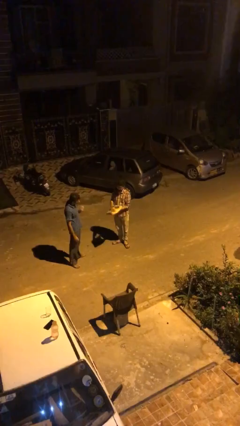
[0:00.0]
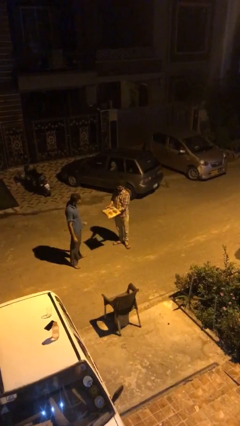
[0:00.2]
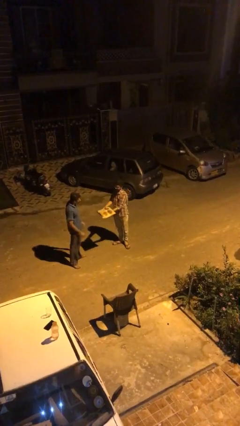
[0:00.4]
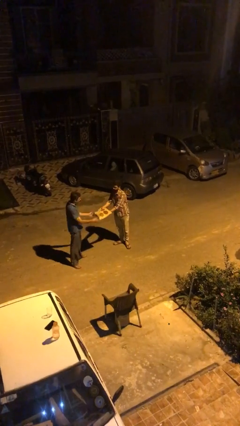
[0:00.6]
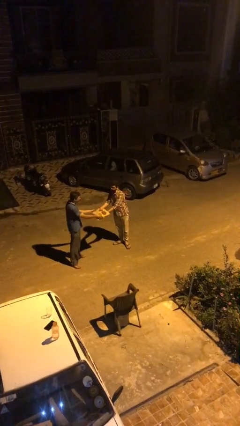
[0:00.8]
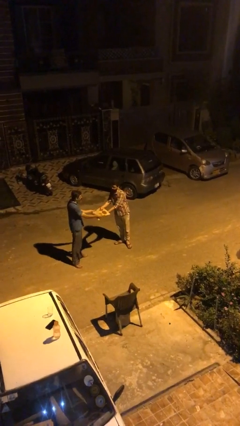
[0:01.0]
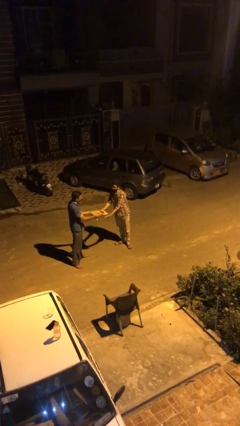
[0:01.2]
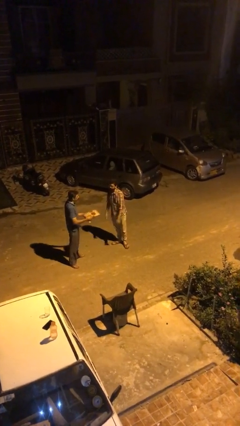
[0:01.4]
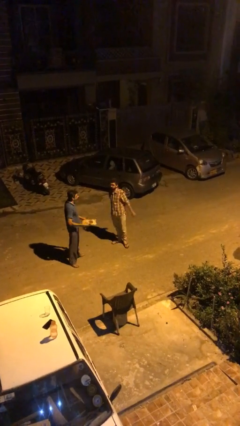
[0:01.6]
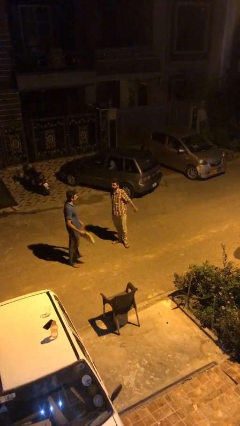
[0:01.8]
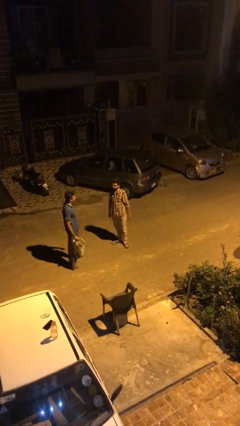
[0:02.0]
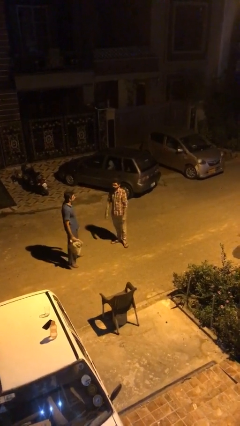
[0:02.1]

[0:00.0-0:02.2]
person transfers object to person

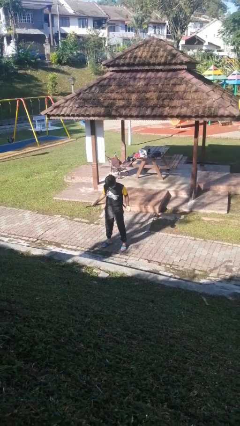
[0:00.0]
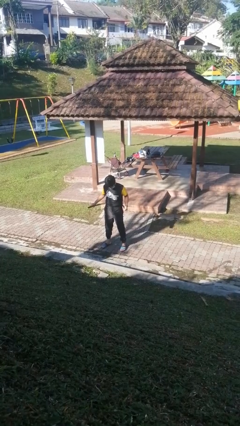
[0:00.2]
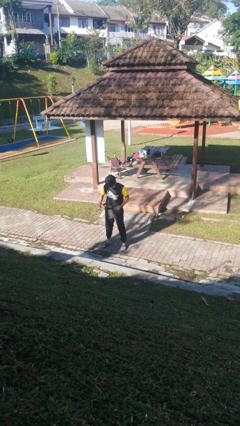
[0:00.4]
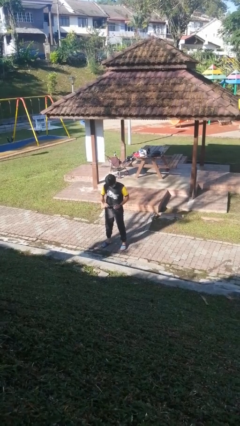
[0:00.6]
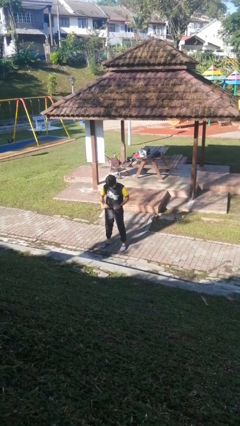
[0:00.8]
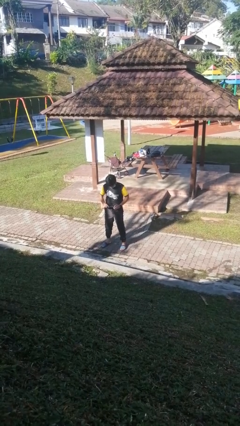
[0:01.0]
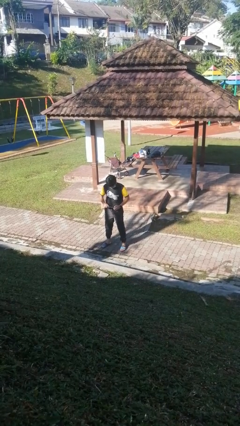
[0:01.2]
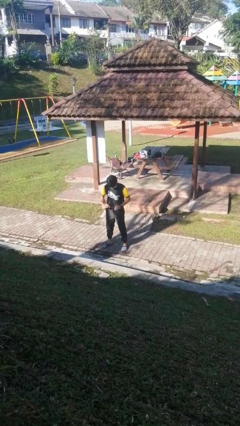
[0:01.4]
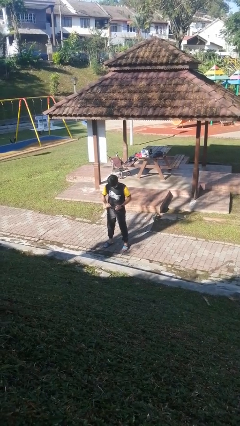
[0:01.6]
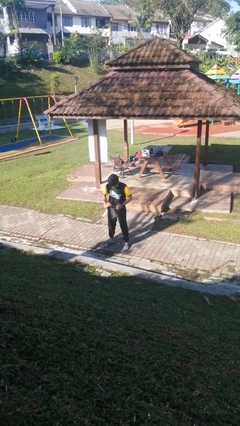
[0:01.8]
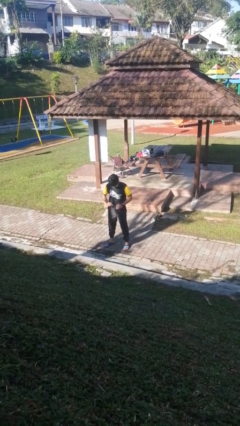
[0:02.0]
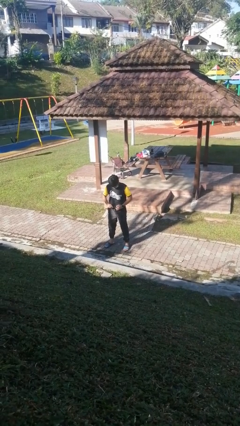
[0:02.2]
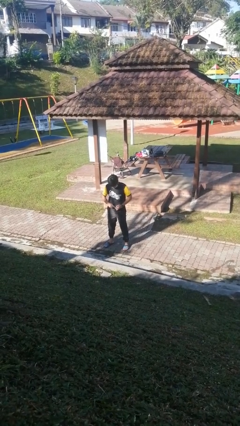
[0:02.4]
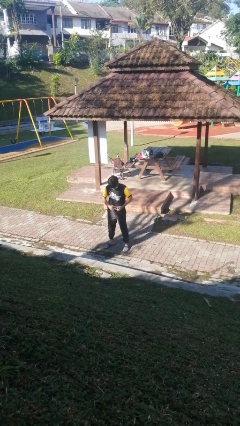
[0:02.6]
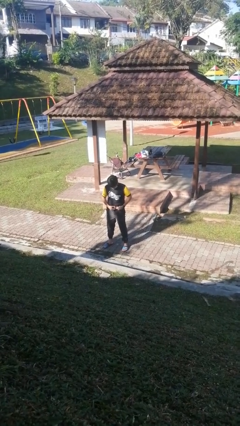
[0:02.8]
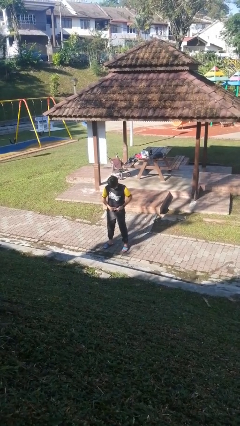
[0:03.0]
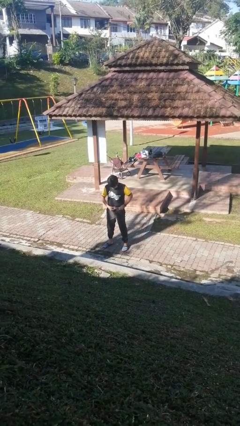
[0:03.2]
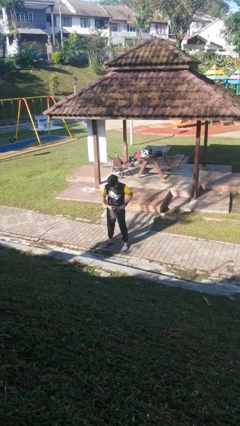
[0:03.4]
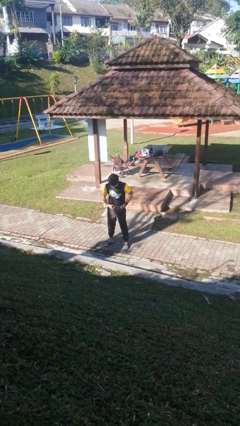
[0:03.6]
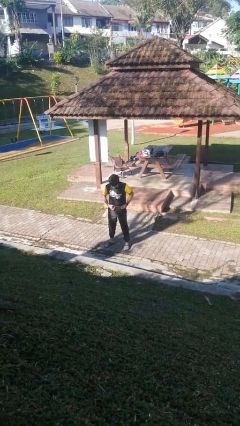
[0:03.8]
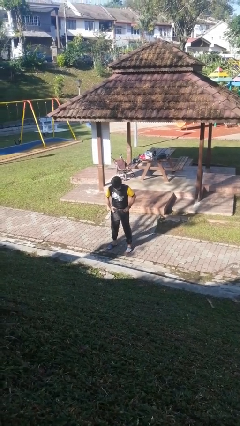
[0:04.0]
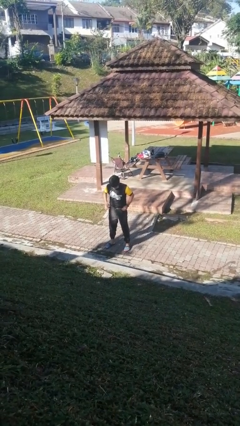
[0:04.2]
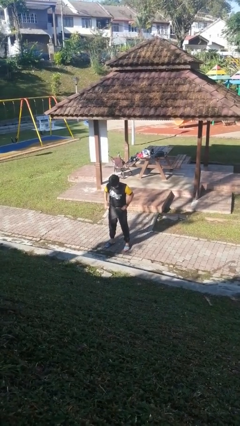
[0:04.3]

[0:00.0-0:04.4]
person puts on belt

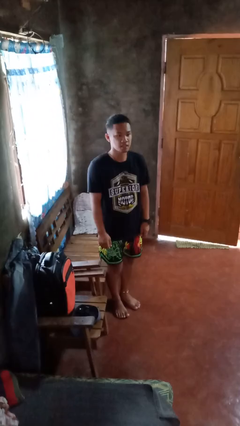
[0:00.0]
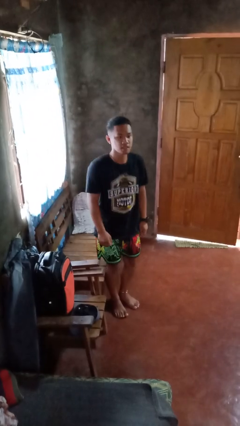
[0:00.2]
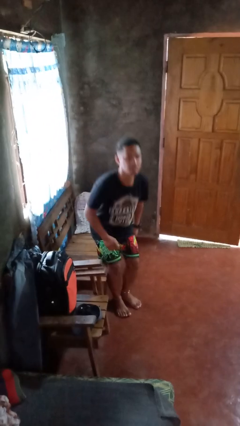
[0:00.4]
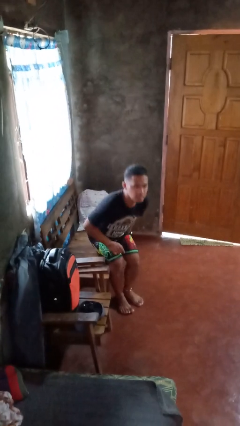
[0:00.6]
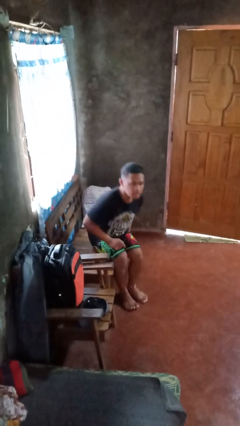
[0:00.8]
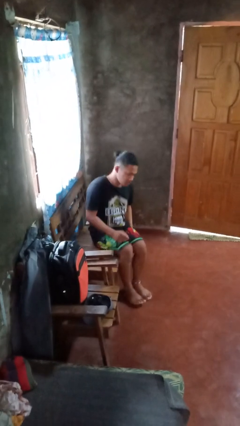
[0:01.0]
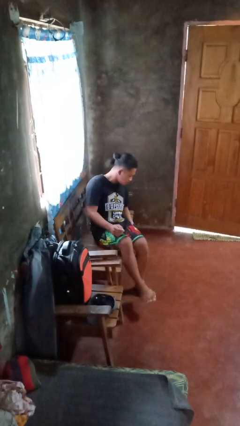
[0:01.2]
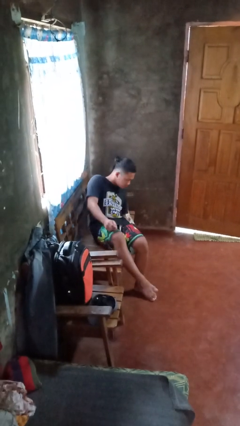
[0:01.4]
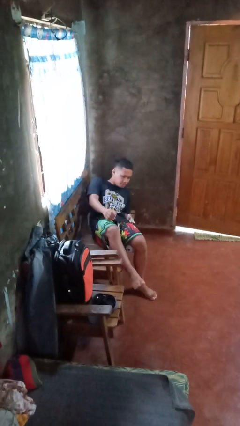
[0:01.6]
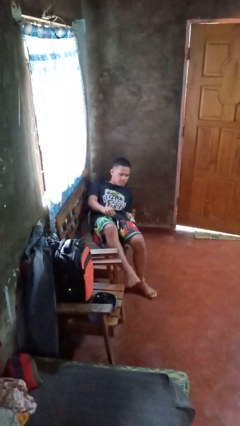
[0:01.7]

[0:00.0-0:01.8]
person lies down on couch

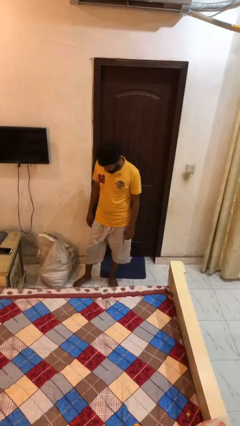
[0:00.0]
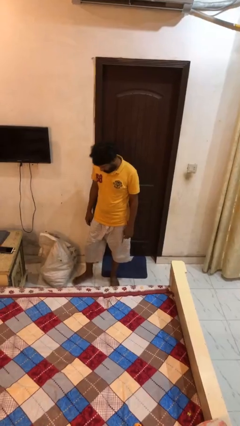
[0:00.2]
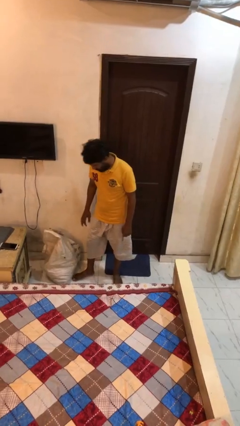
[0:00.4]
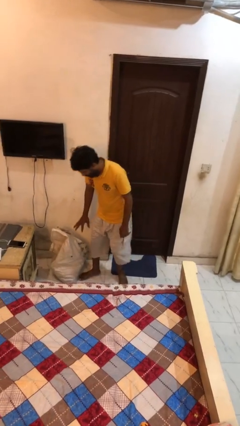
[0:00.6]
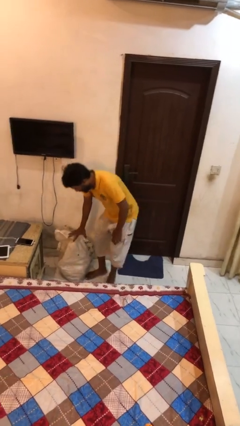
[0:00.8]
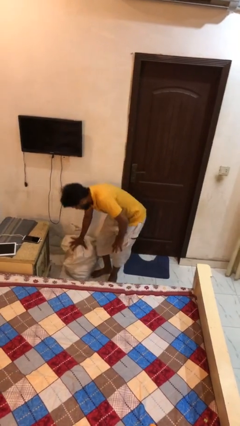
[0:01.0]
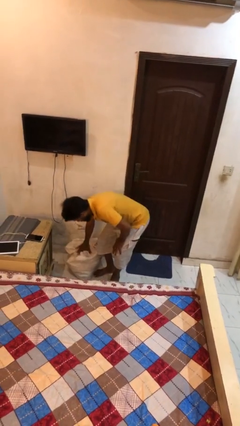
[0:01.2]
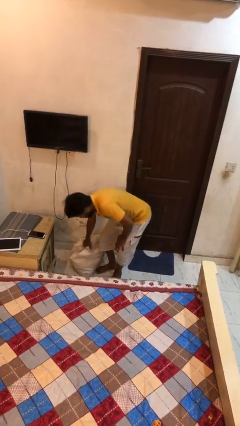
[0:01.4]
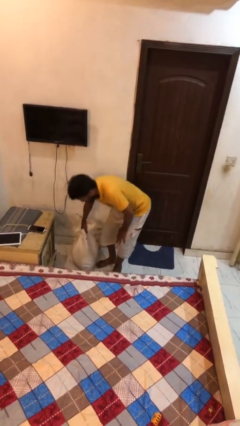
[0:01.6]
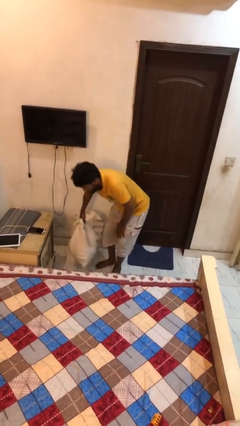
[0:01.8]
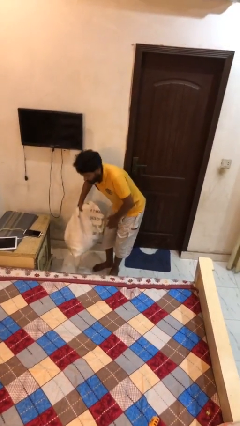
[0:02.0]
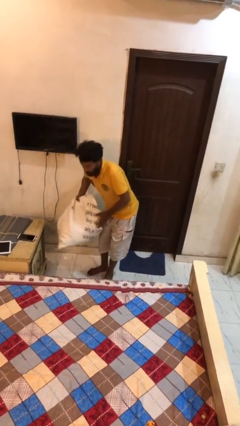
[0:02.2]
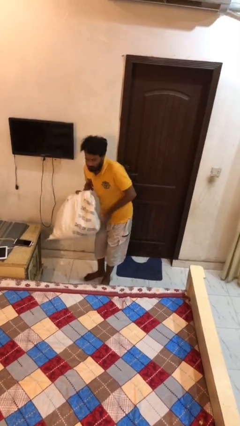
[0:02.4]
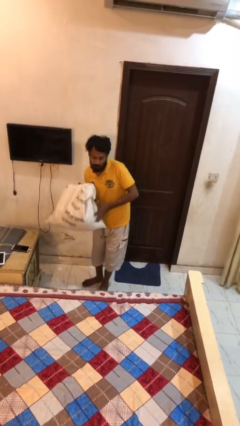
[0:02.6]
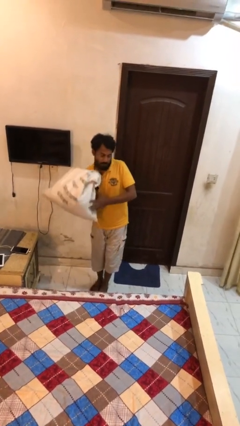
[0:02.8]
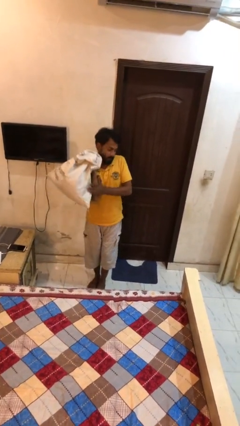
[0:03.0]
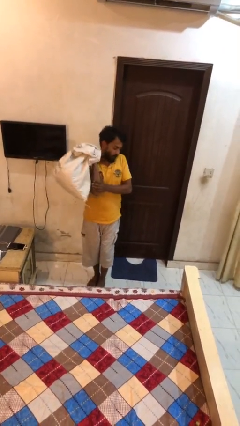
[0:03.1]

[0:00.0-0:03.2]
person picks up object from floor

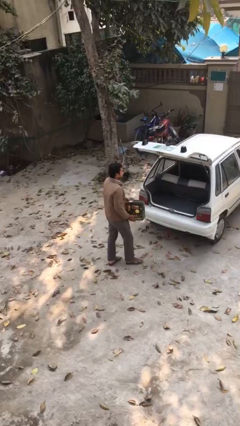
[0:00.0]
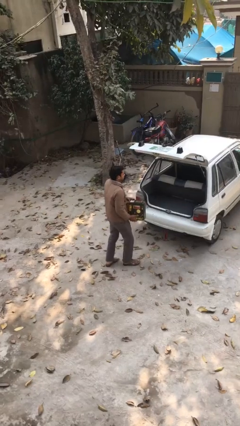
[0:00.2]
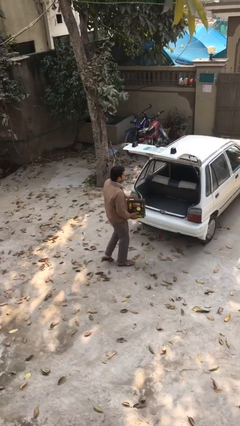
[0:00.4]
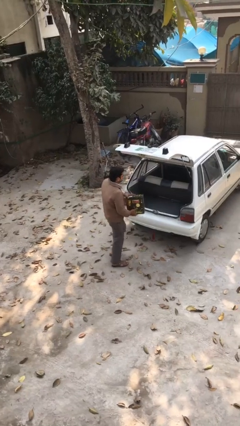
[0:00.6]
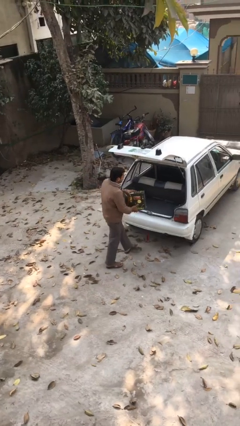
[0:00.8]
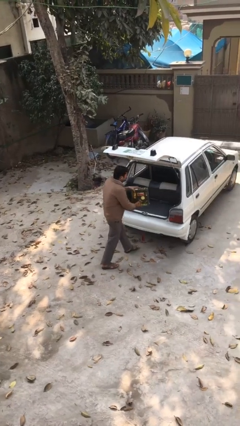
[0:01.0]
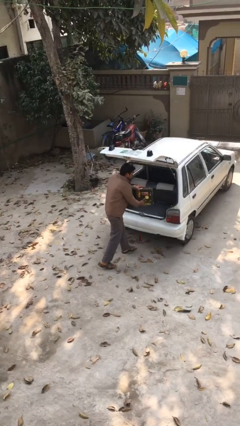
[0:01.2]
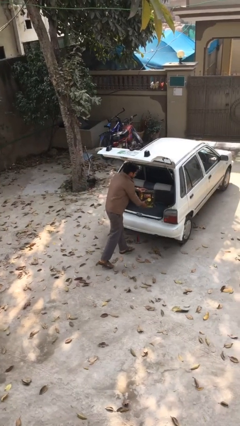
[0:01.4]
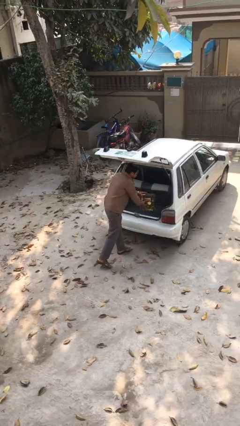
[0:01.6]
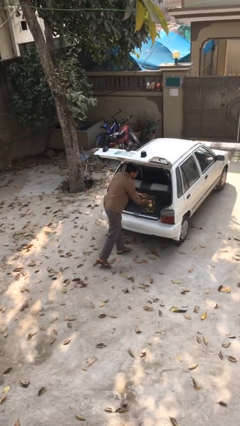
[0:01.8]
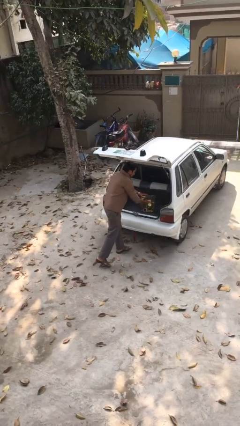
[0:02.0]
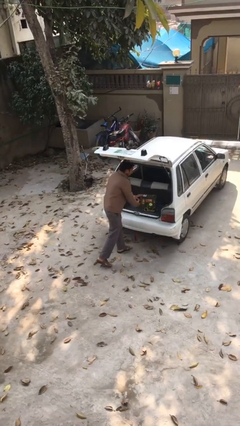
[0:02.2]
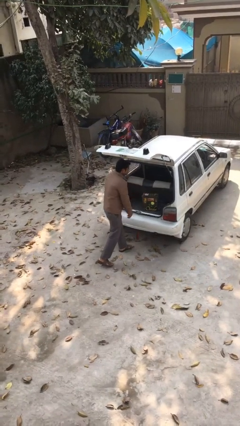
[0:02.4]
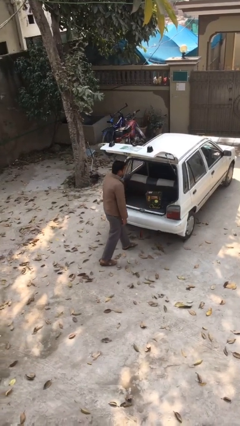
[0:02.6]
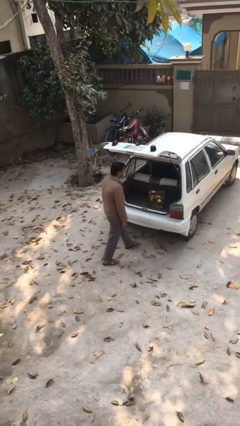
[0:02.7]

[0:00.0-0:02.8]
person loads car

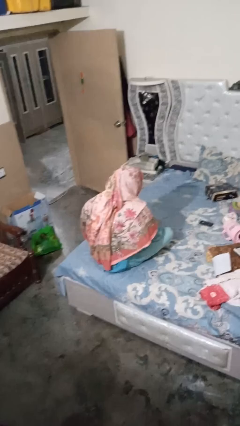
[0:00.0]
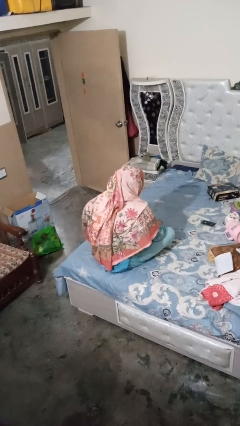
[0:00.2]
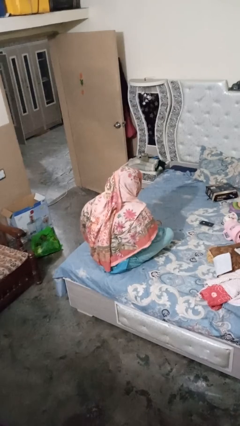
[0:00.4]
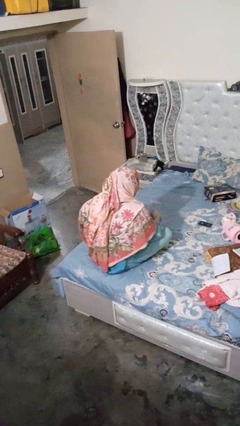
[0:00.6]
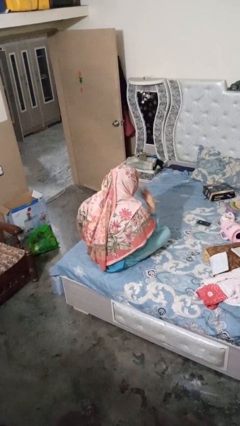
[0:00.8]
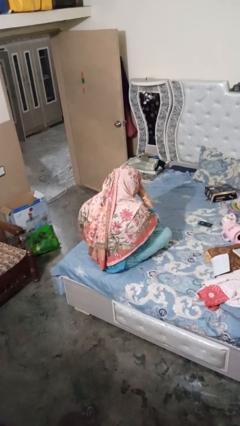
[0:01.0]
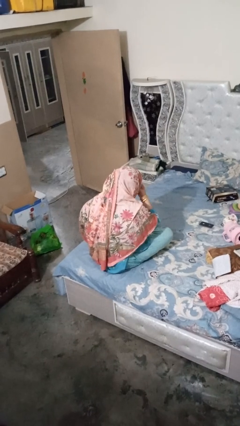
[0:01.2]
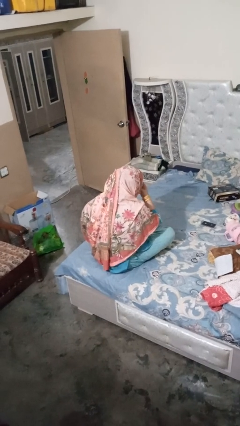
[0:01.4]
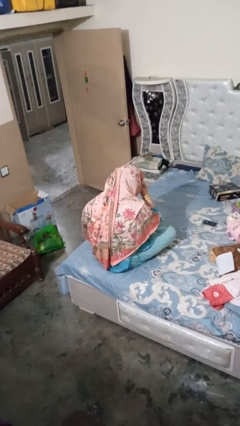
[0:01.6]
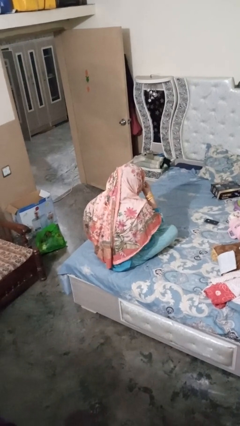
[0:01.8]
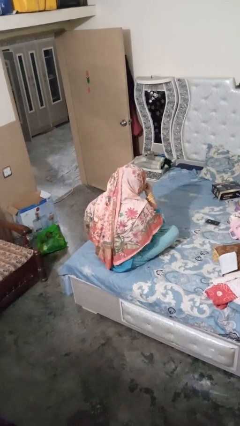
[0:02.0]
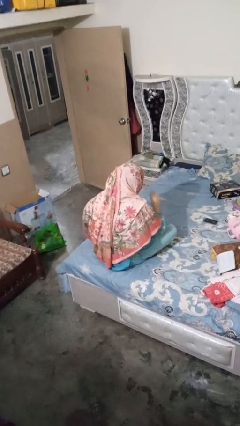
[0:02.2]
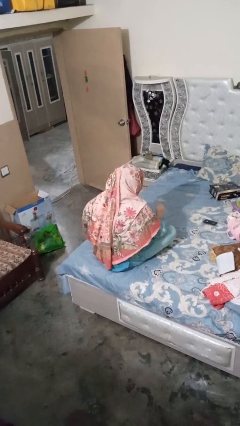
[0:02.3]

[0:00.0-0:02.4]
person blows nose

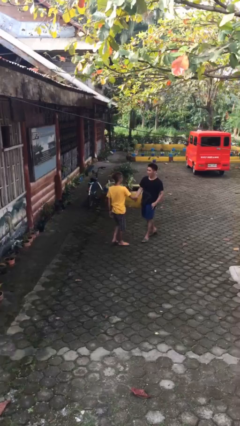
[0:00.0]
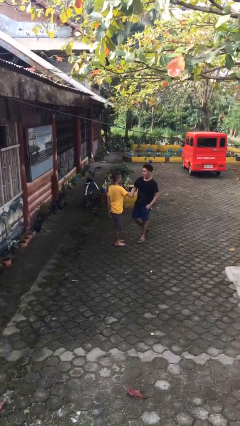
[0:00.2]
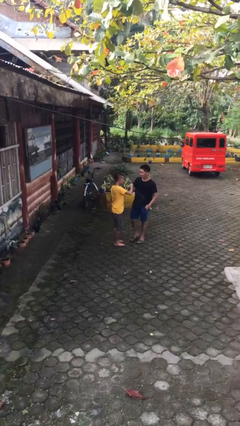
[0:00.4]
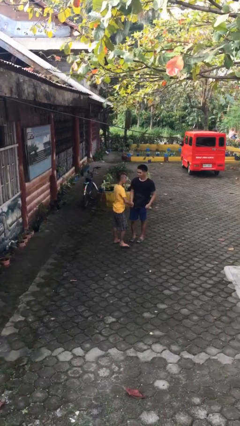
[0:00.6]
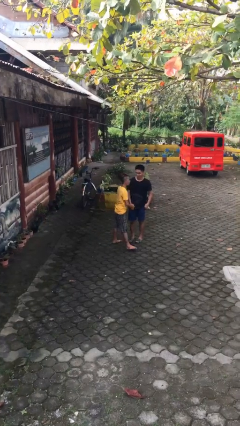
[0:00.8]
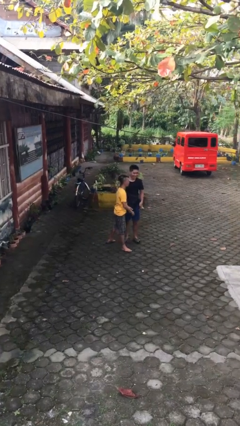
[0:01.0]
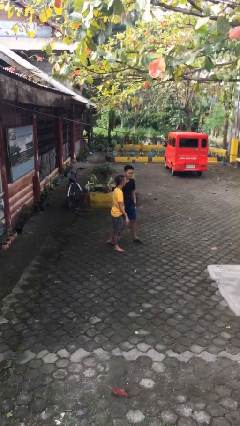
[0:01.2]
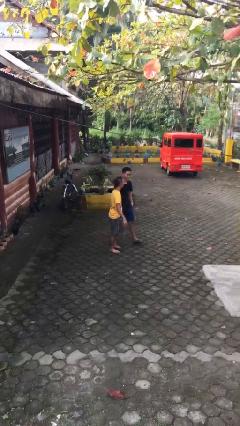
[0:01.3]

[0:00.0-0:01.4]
person shakes hand
